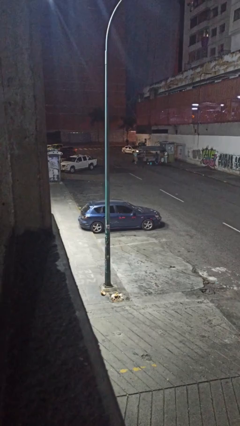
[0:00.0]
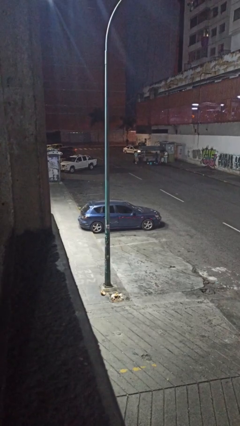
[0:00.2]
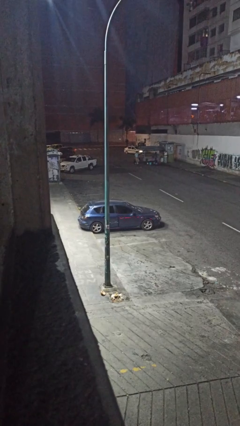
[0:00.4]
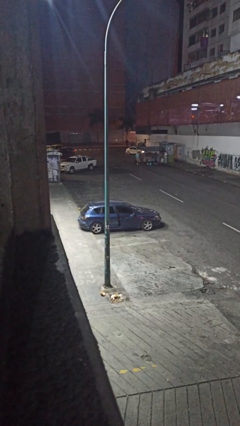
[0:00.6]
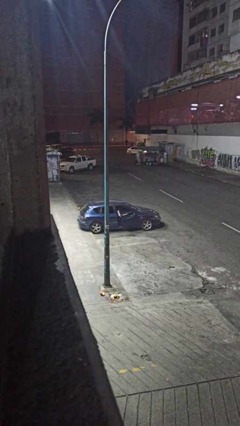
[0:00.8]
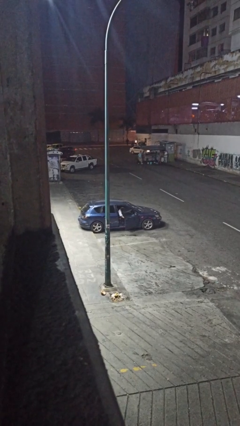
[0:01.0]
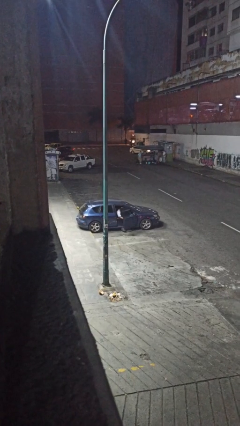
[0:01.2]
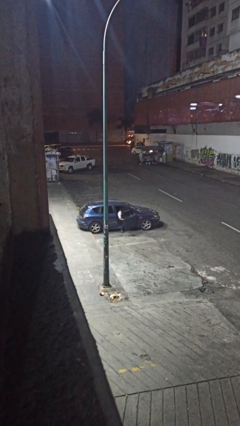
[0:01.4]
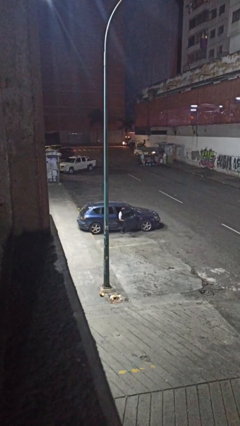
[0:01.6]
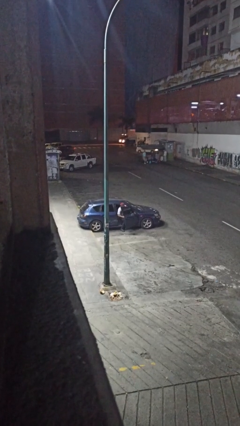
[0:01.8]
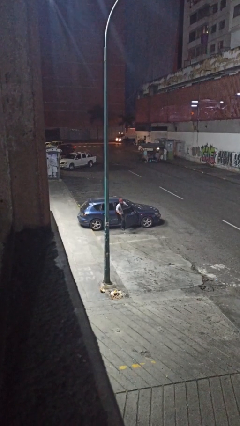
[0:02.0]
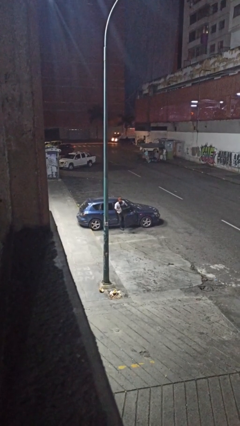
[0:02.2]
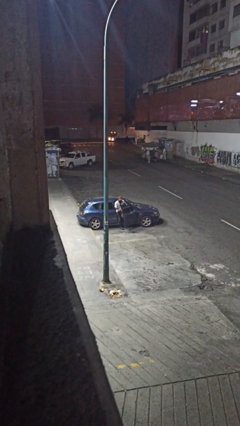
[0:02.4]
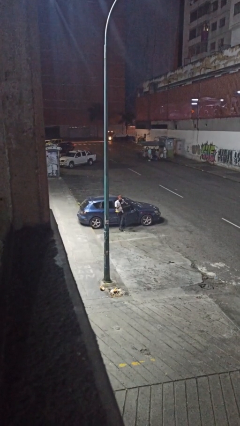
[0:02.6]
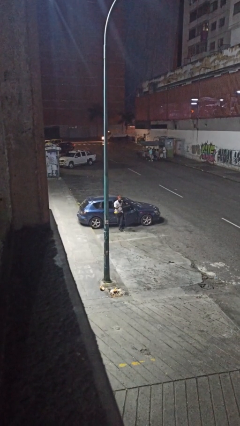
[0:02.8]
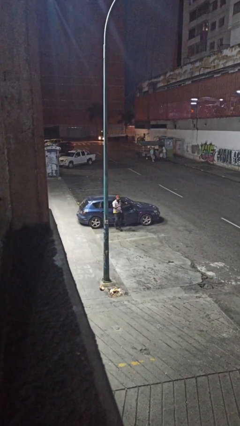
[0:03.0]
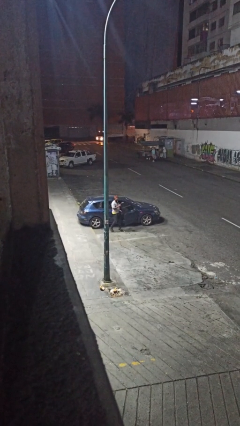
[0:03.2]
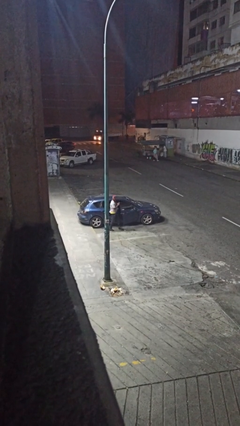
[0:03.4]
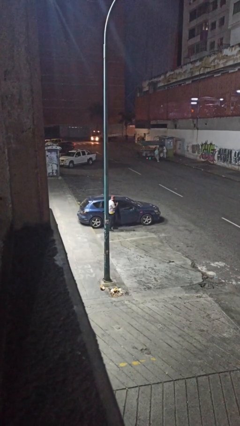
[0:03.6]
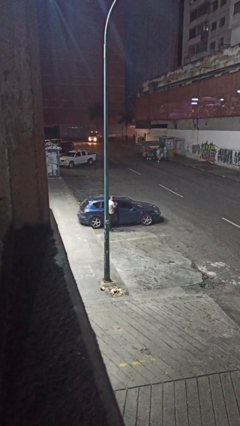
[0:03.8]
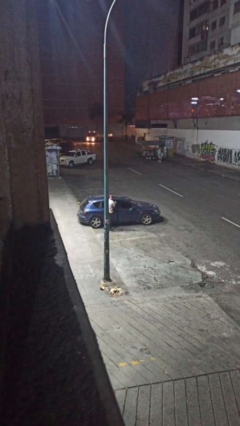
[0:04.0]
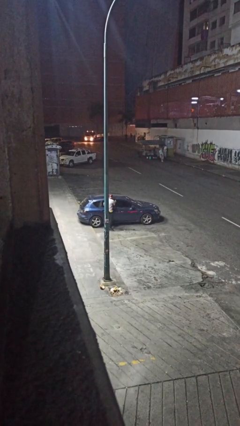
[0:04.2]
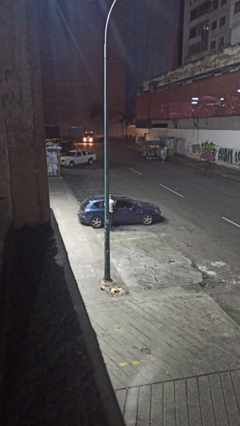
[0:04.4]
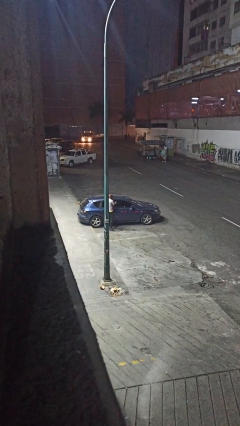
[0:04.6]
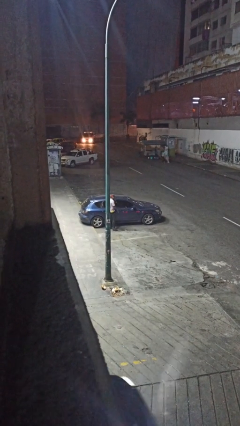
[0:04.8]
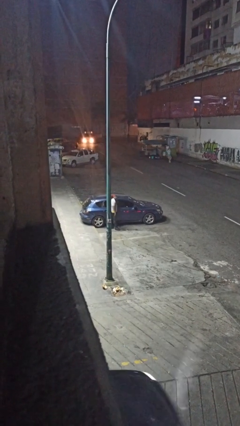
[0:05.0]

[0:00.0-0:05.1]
car drops off person

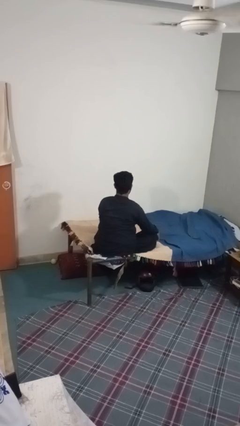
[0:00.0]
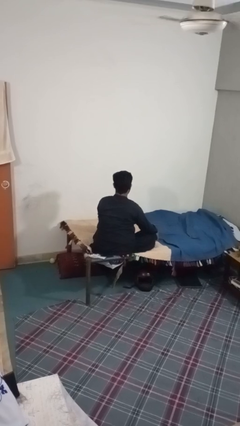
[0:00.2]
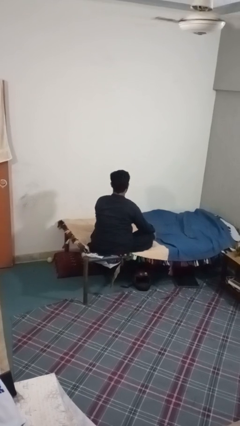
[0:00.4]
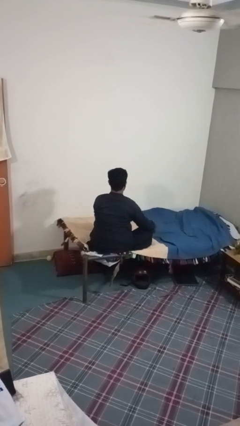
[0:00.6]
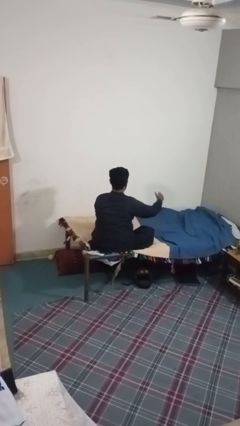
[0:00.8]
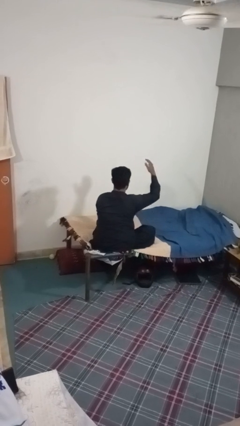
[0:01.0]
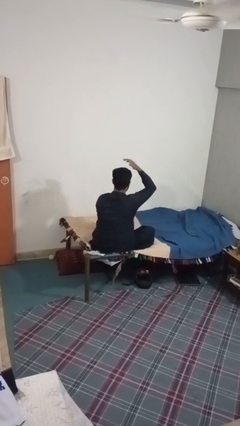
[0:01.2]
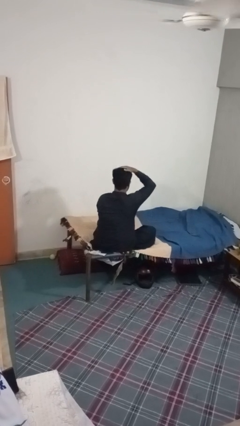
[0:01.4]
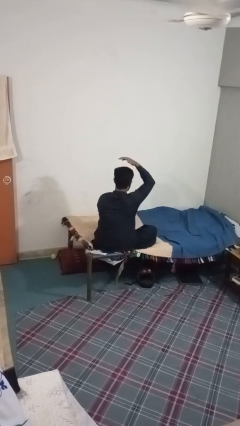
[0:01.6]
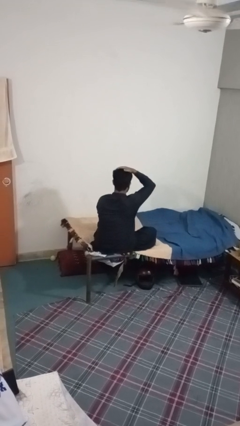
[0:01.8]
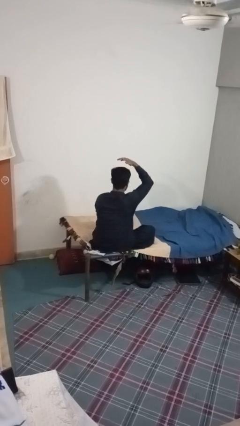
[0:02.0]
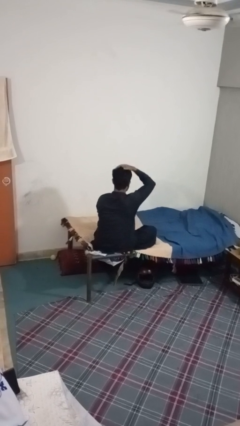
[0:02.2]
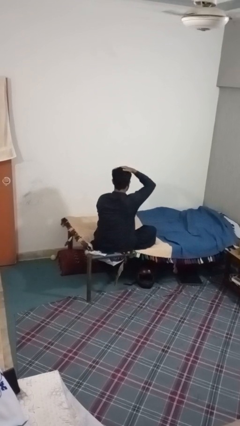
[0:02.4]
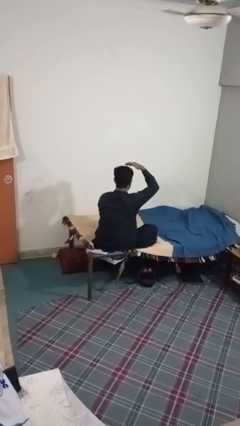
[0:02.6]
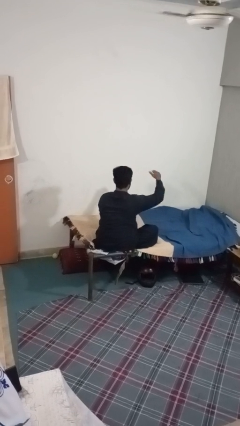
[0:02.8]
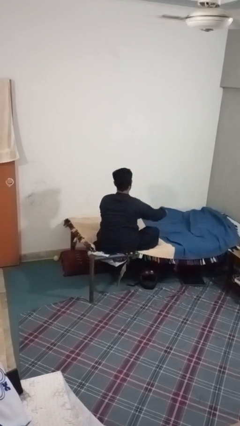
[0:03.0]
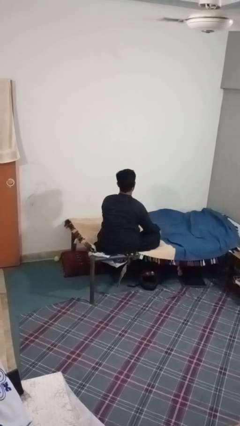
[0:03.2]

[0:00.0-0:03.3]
person pats head

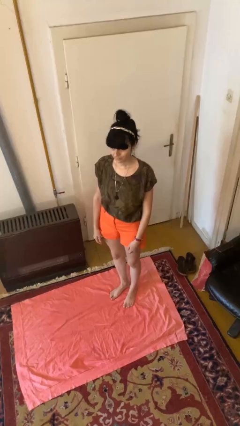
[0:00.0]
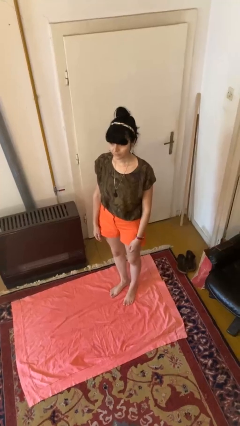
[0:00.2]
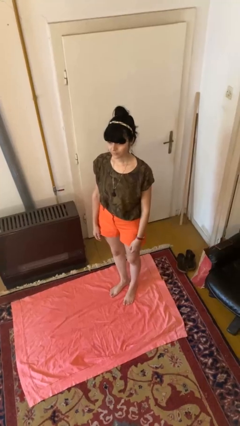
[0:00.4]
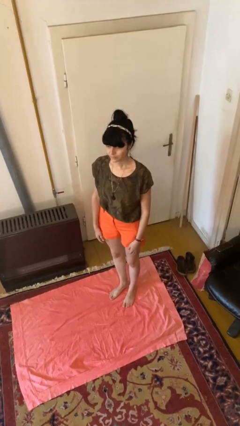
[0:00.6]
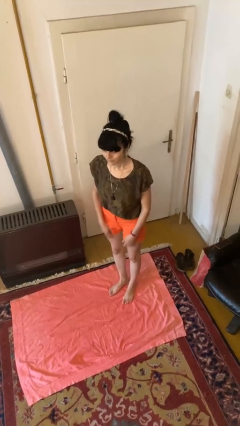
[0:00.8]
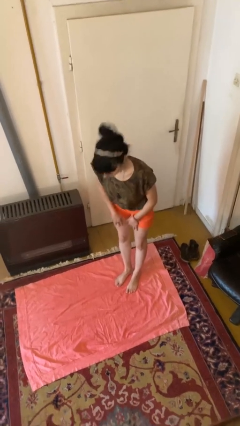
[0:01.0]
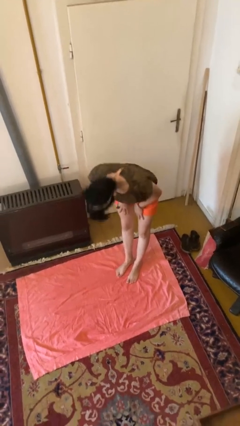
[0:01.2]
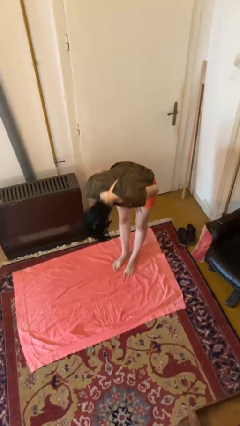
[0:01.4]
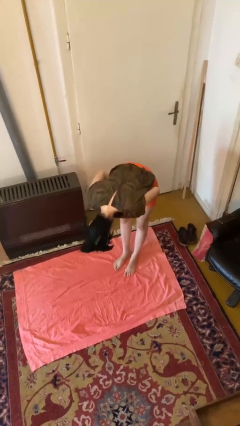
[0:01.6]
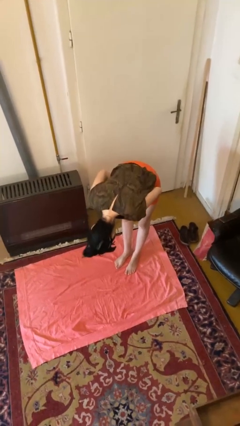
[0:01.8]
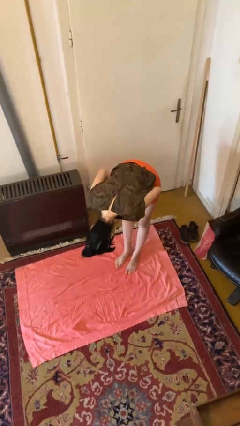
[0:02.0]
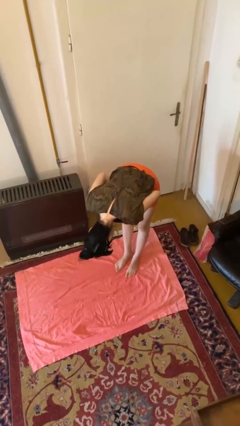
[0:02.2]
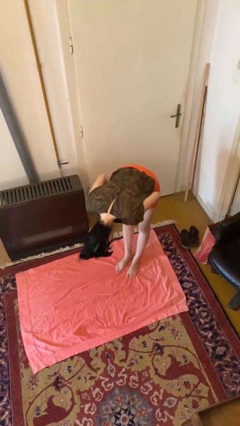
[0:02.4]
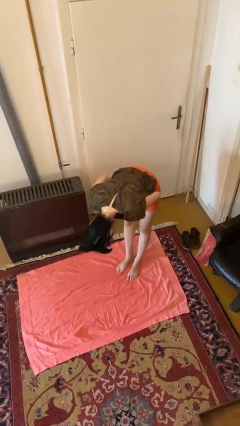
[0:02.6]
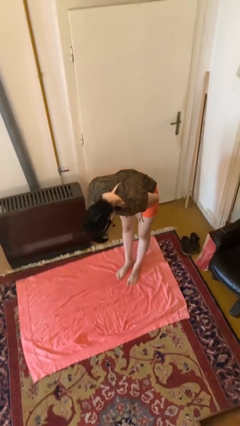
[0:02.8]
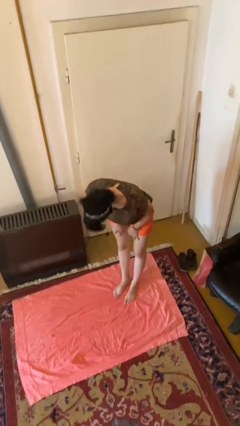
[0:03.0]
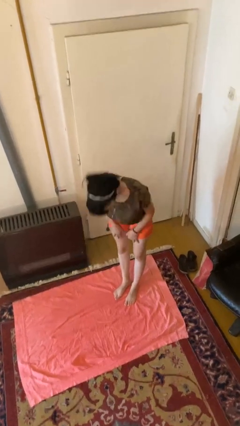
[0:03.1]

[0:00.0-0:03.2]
person bows

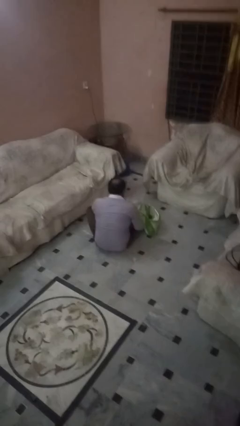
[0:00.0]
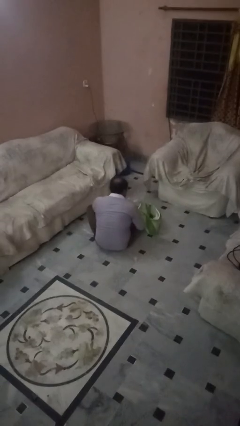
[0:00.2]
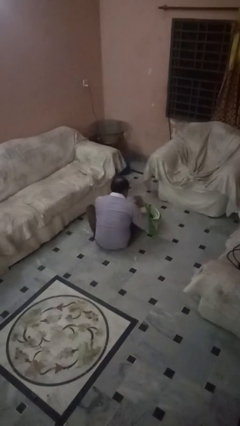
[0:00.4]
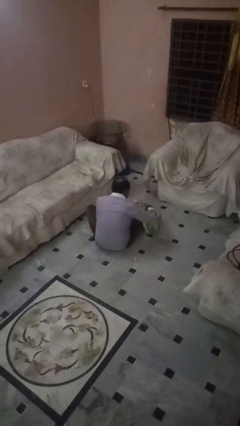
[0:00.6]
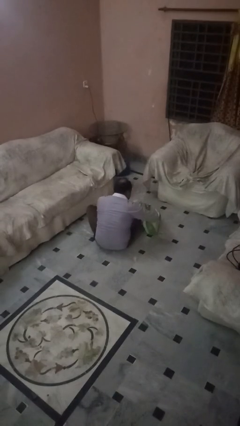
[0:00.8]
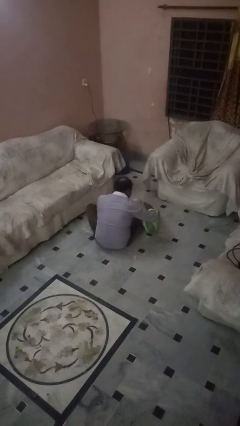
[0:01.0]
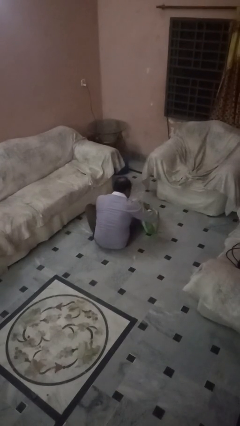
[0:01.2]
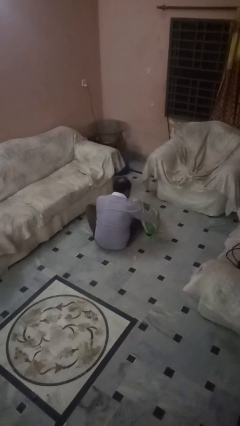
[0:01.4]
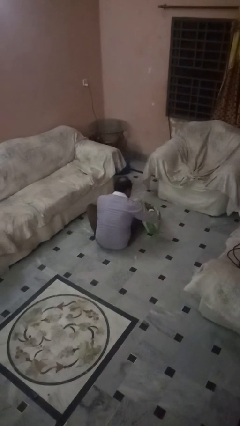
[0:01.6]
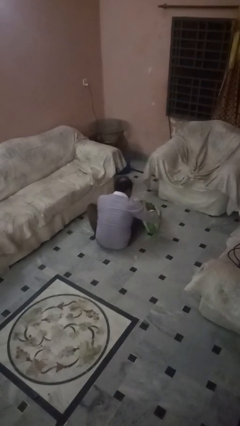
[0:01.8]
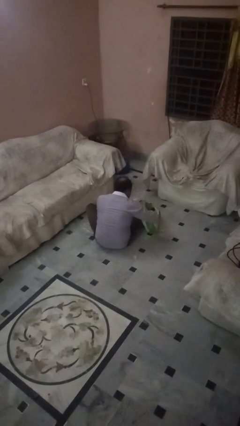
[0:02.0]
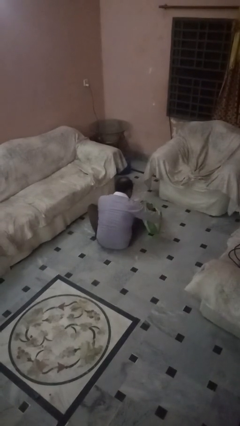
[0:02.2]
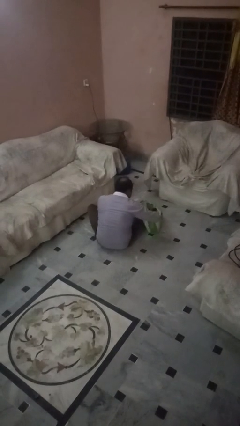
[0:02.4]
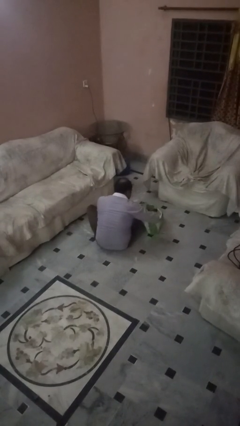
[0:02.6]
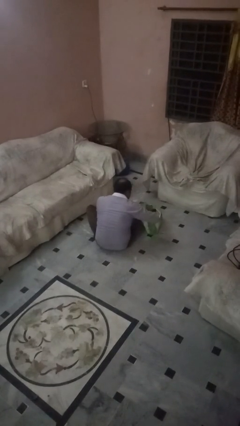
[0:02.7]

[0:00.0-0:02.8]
person searches in bag

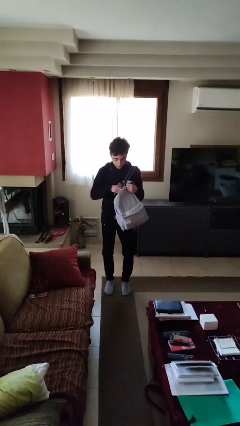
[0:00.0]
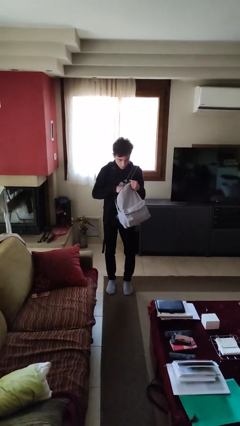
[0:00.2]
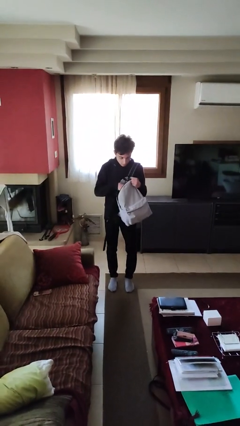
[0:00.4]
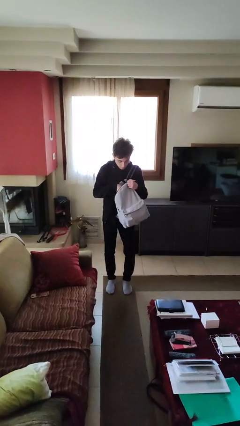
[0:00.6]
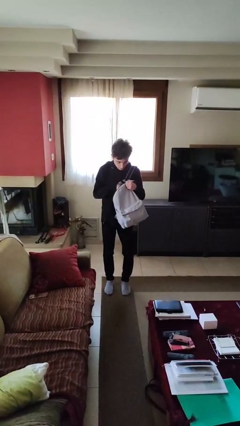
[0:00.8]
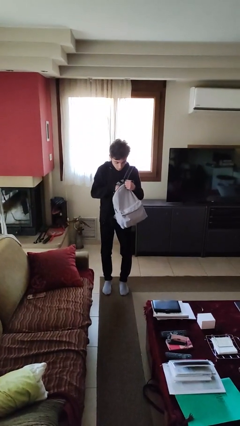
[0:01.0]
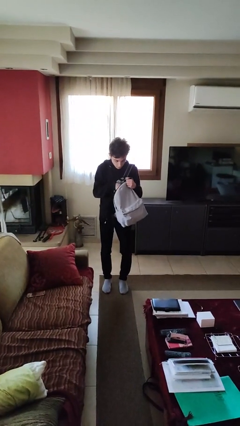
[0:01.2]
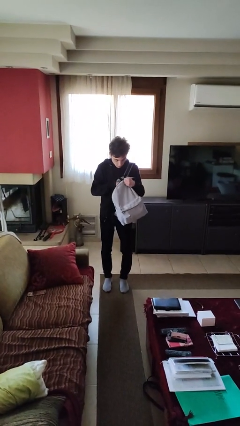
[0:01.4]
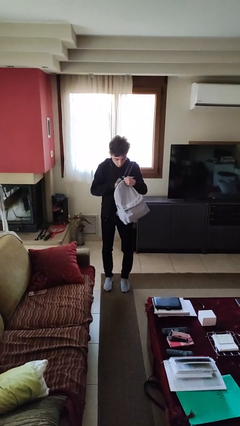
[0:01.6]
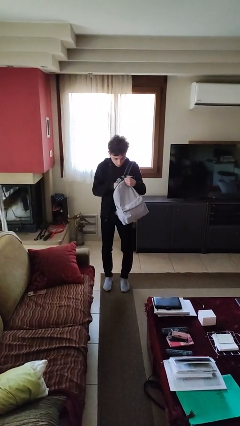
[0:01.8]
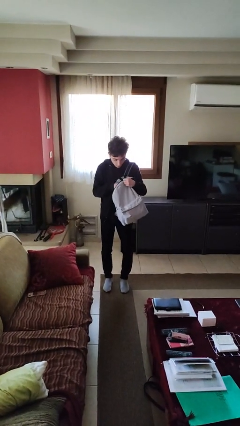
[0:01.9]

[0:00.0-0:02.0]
person searches in backpack

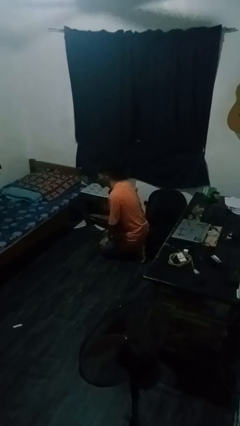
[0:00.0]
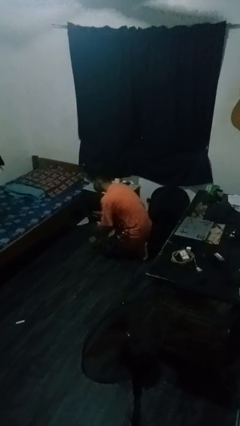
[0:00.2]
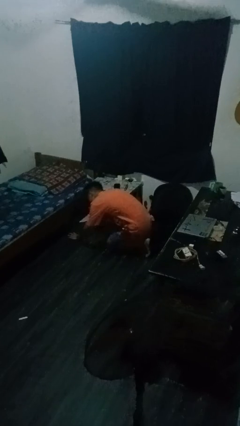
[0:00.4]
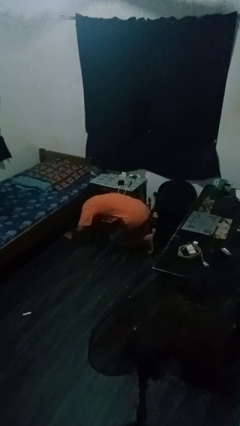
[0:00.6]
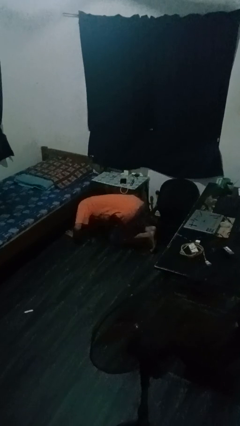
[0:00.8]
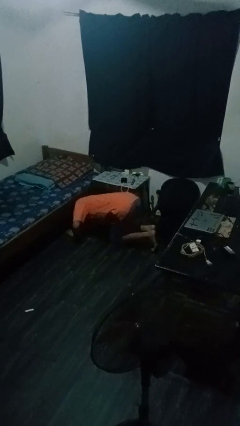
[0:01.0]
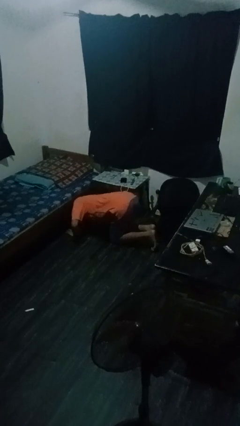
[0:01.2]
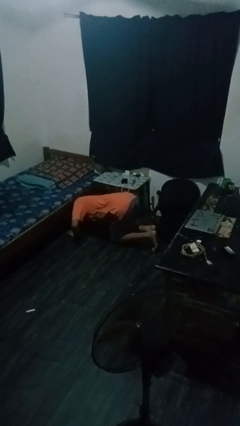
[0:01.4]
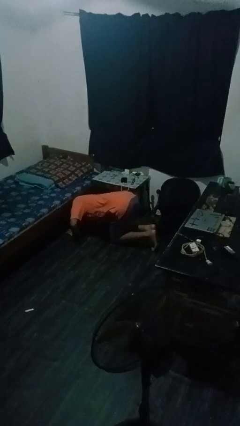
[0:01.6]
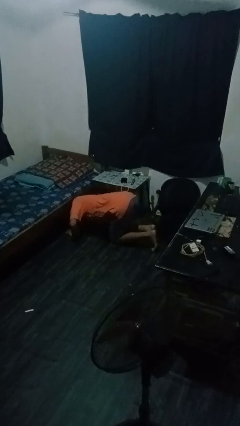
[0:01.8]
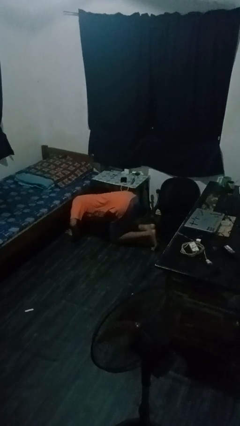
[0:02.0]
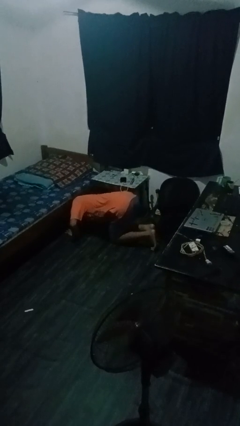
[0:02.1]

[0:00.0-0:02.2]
person searches under bed
